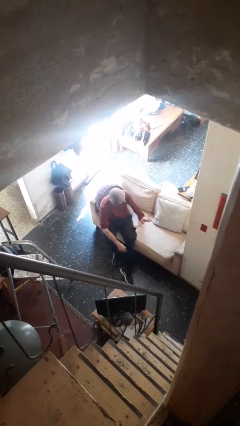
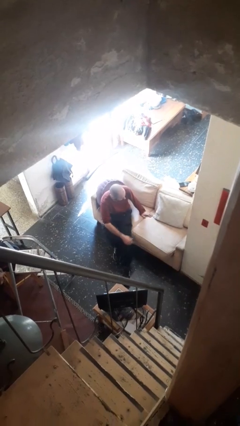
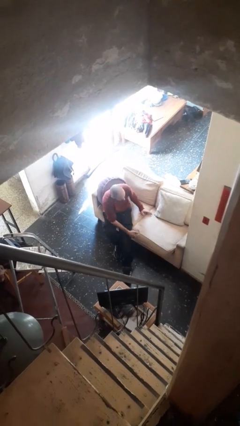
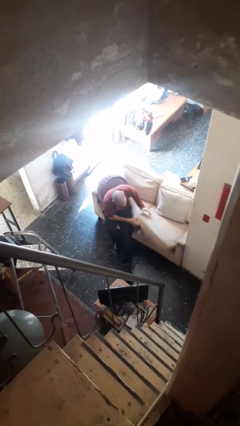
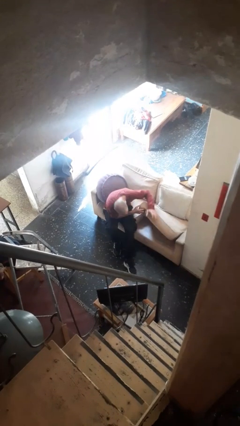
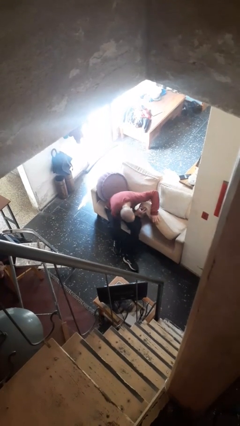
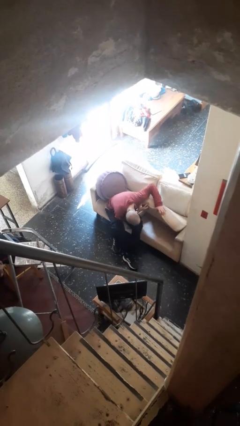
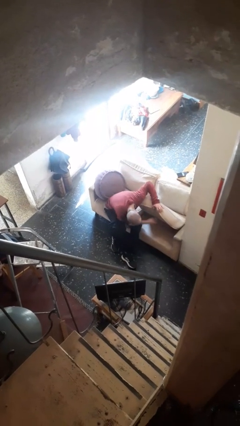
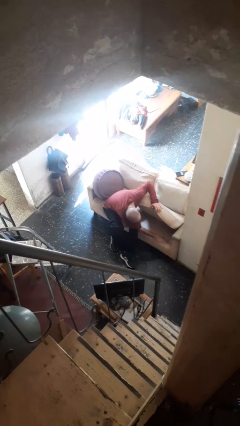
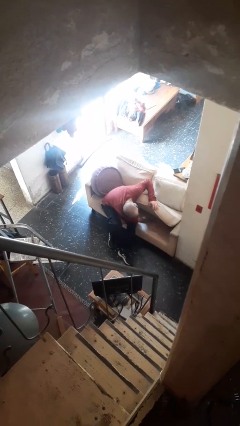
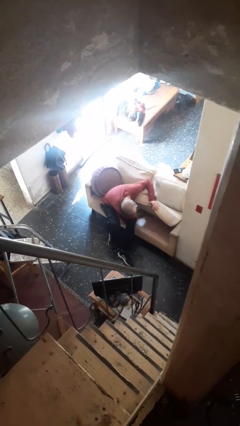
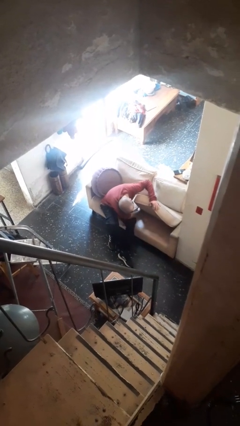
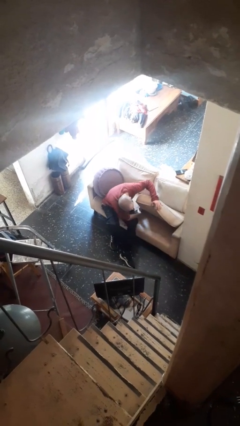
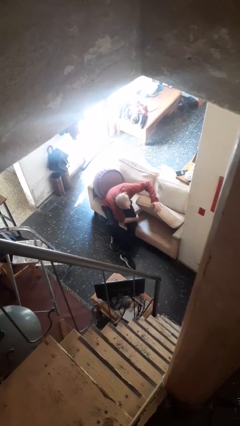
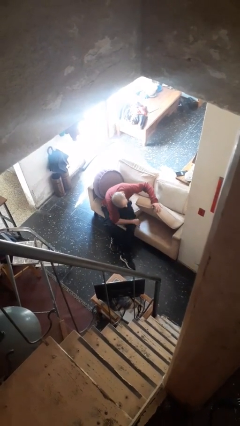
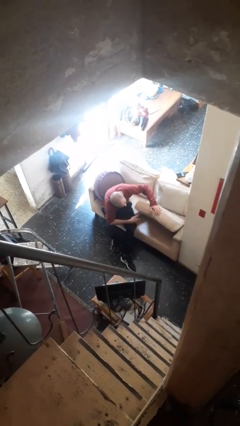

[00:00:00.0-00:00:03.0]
person searches in couch

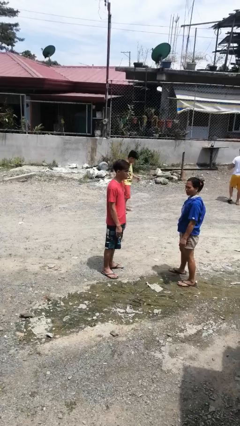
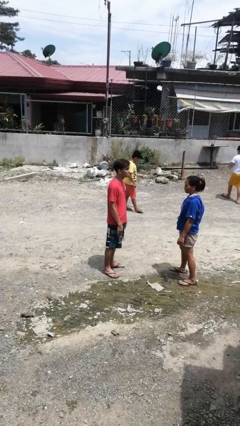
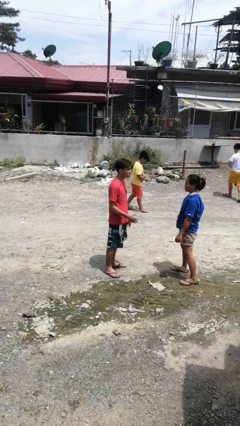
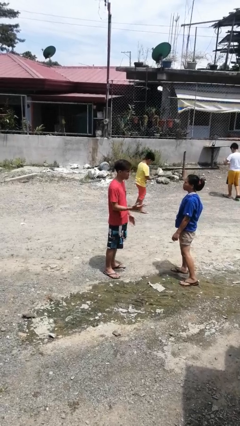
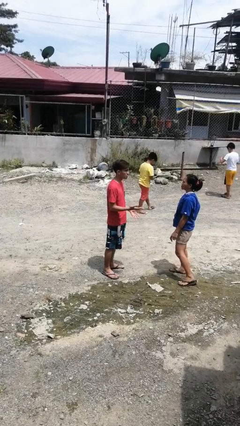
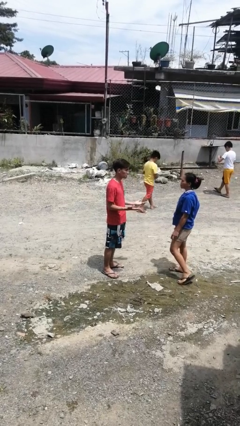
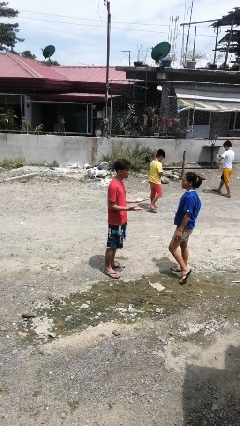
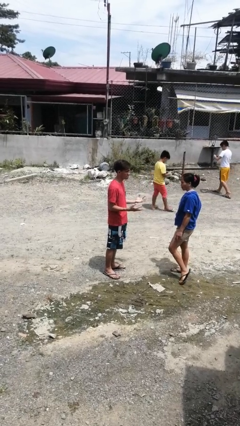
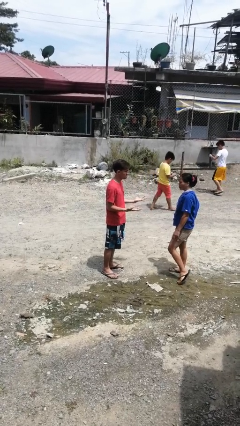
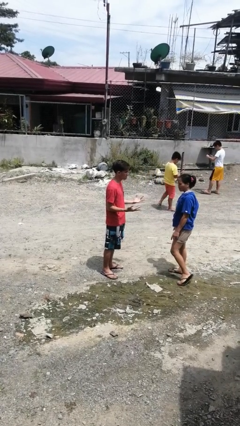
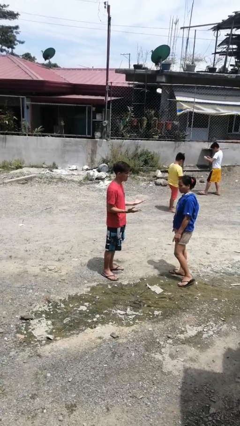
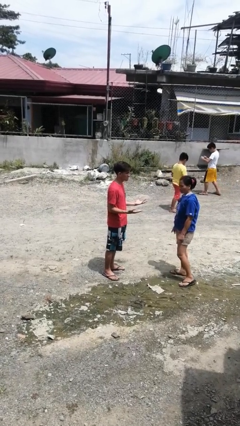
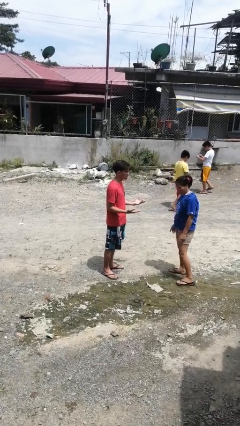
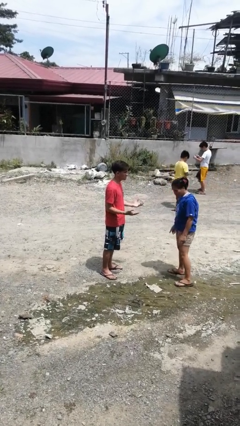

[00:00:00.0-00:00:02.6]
person talks to person

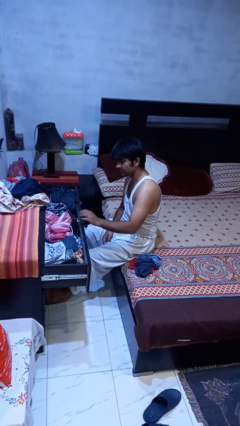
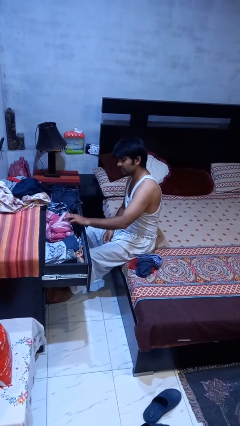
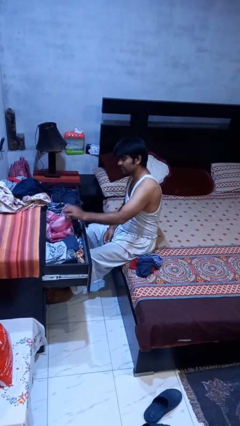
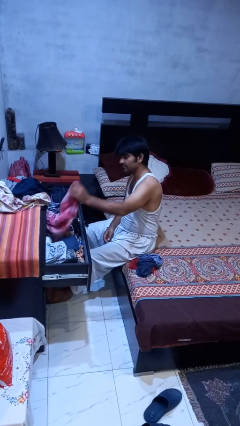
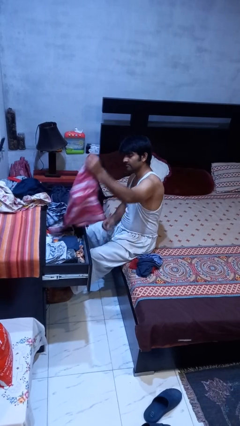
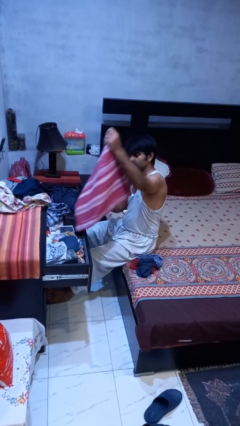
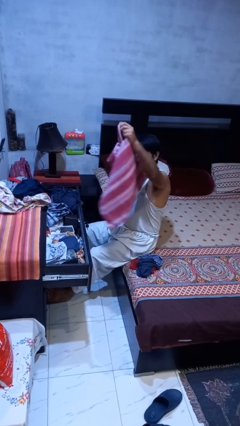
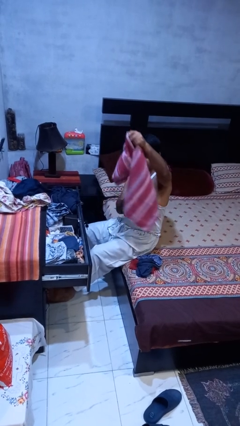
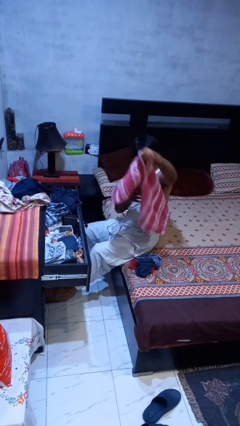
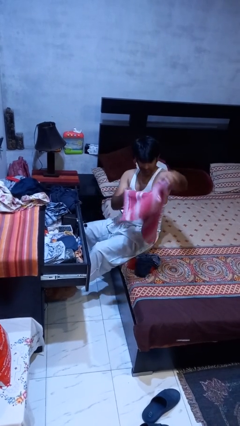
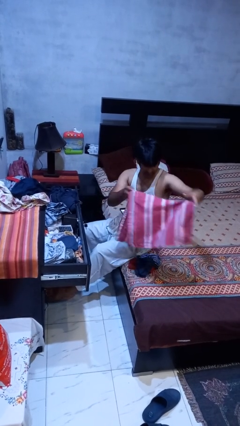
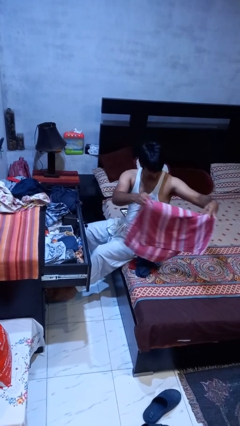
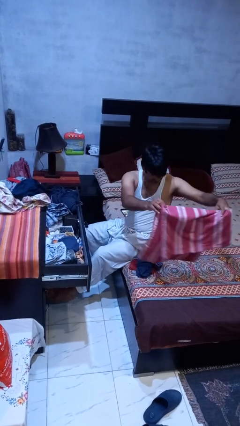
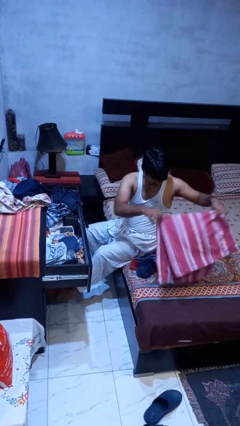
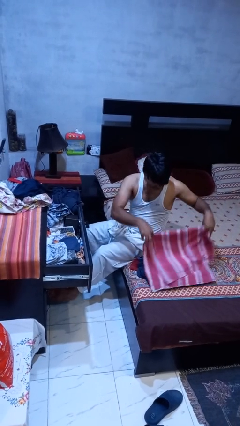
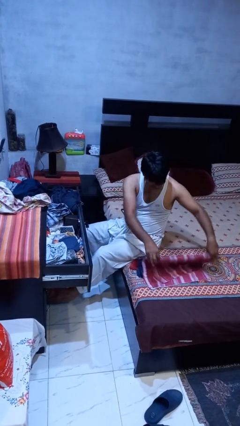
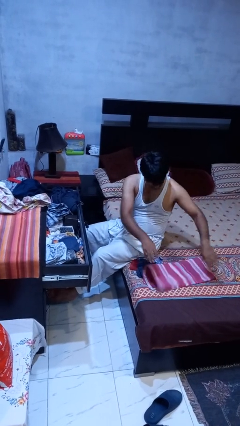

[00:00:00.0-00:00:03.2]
person takes clothes from dresser

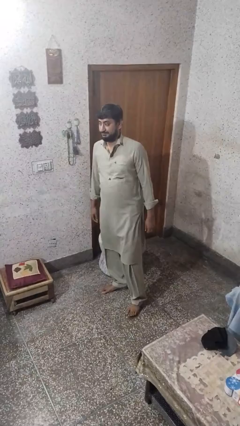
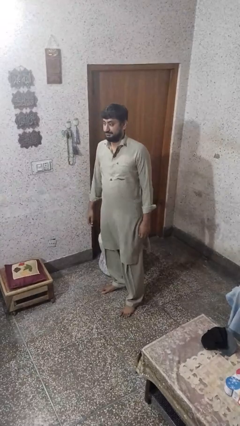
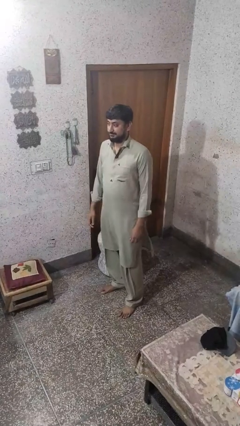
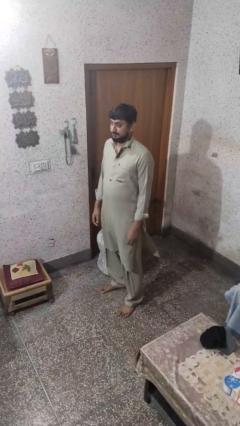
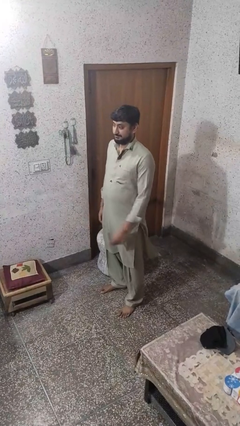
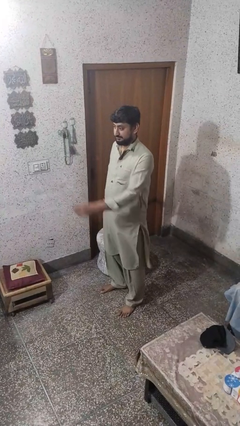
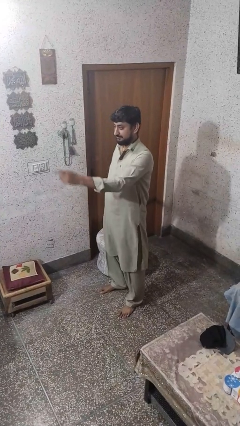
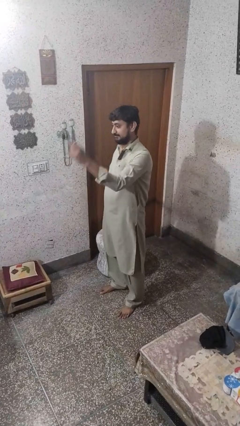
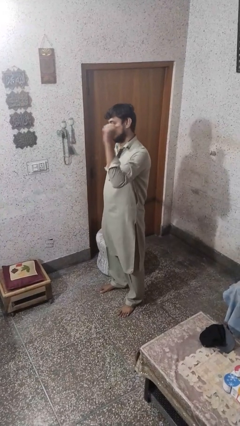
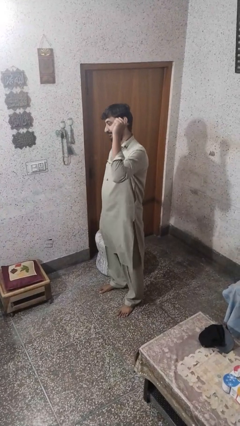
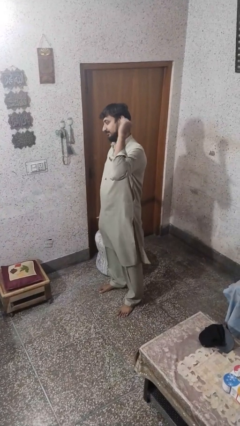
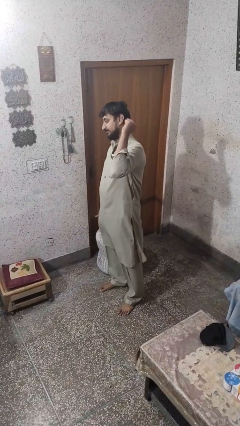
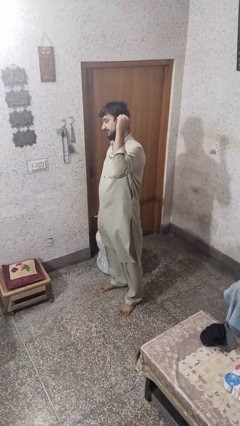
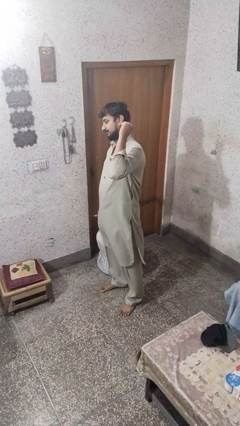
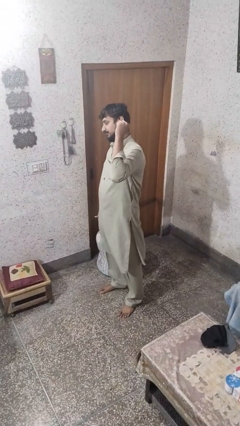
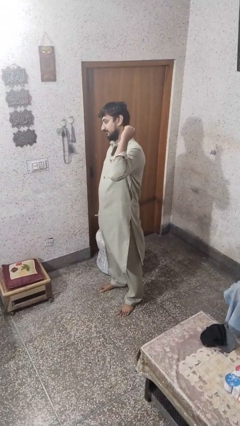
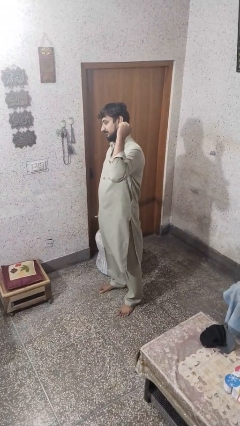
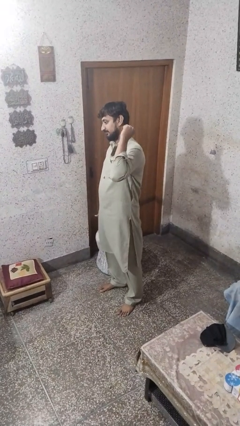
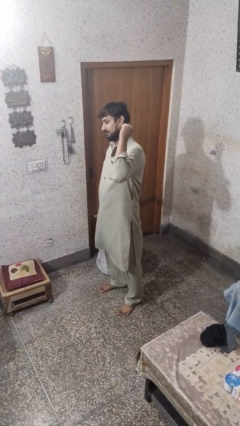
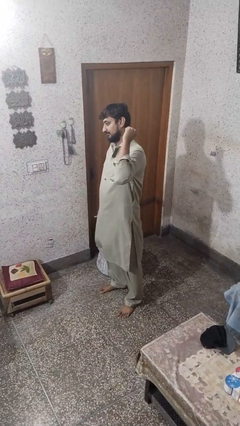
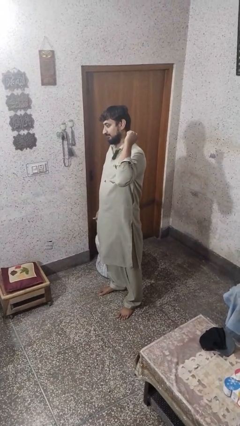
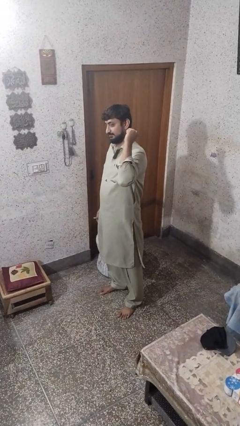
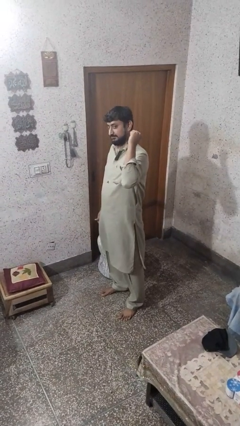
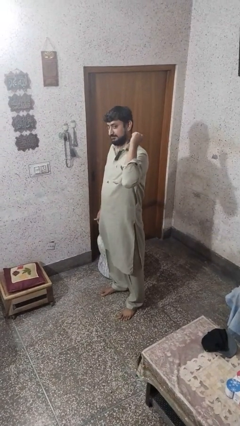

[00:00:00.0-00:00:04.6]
person gestures behind me

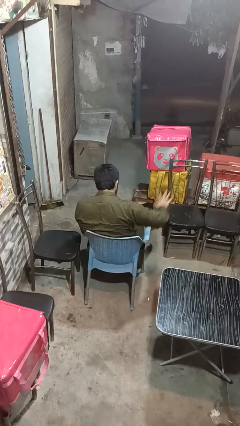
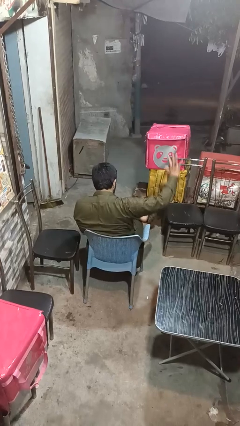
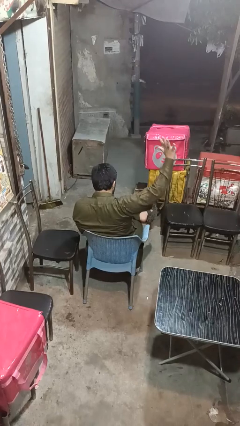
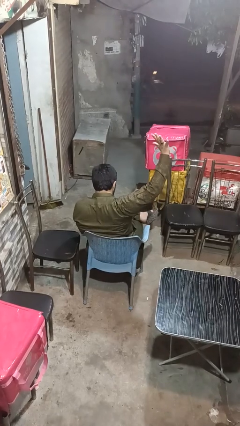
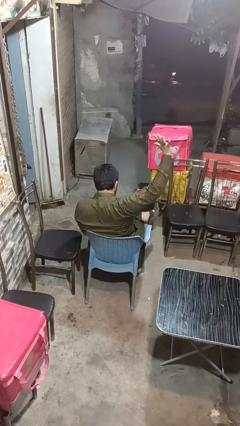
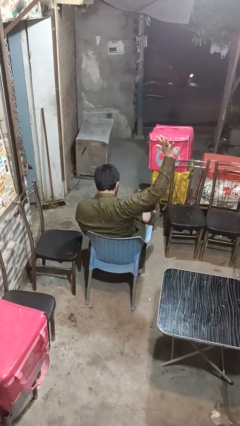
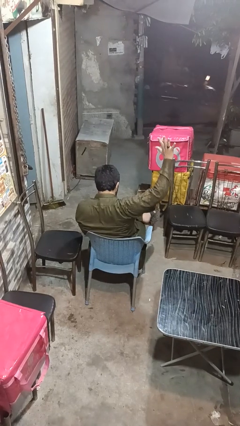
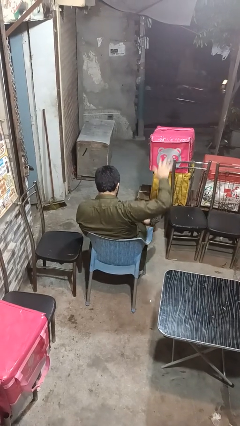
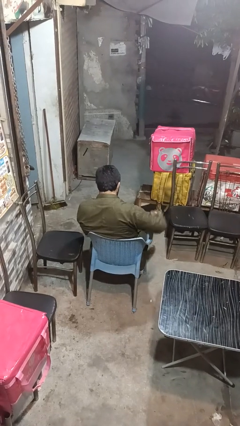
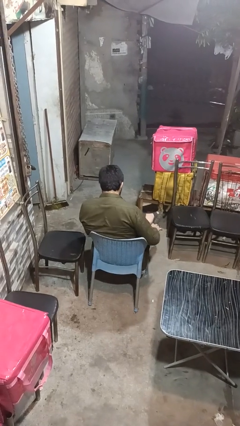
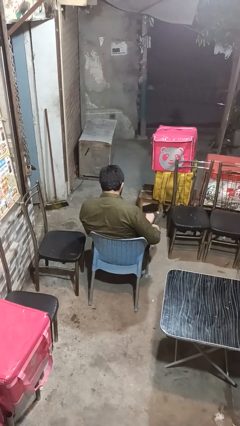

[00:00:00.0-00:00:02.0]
person gestures number five

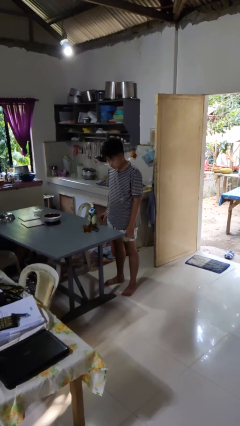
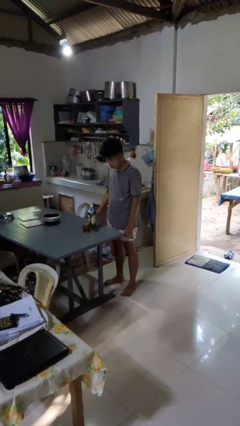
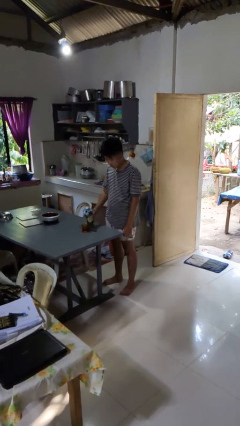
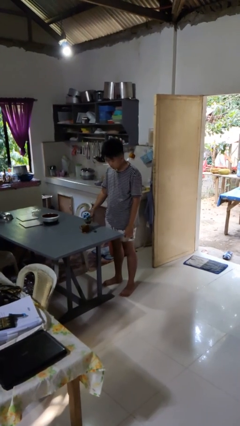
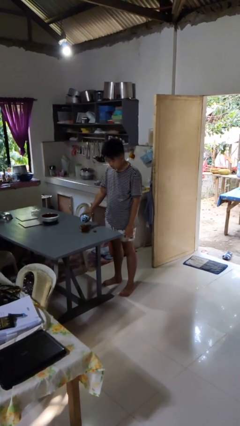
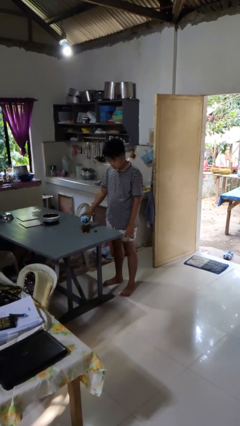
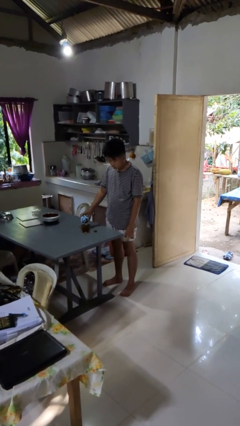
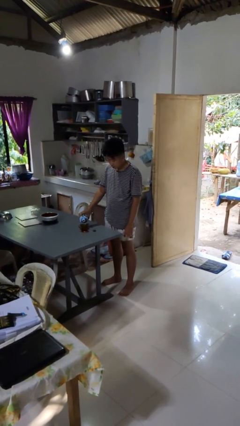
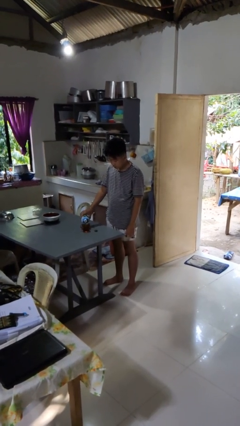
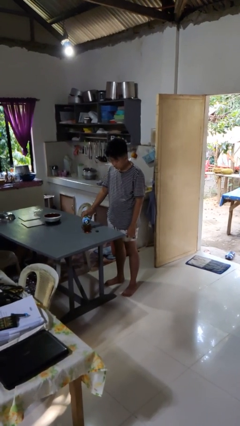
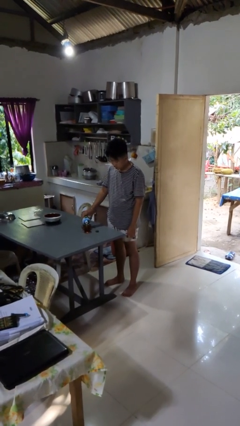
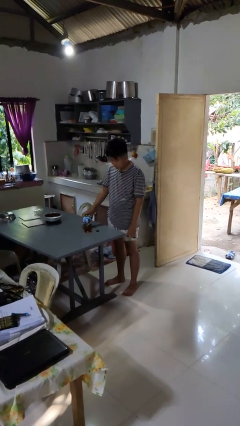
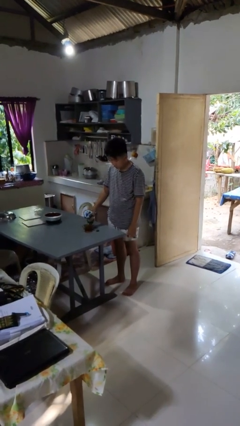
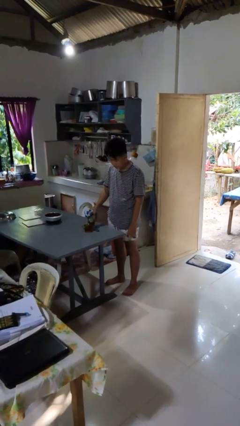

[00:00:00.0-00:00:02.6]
person pours liquid into cup
